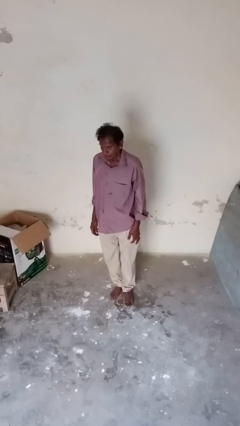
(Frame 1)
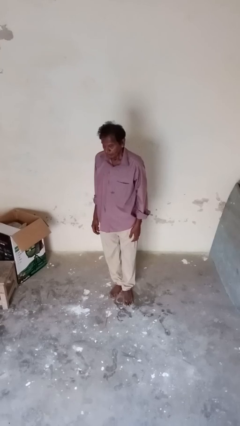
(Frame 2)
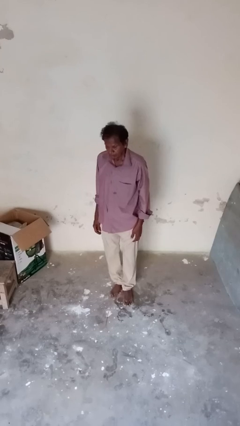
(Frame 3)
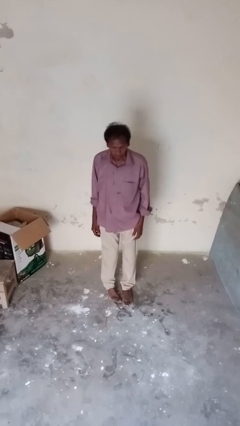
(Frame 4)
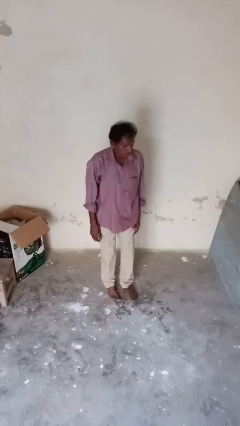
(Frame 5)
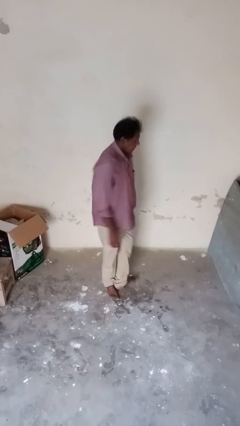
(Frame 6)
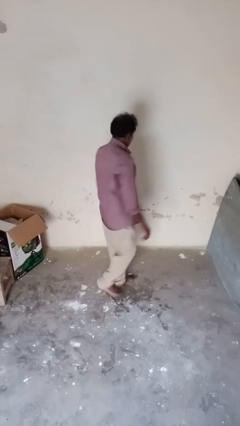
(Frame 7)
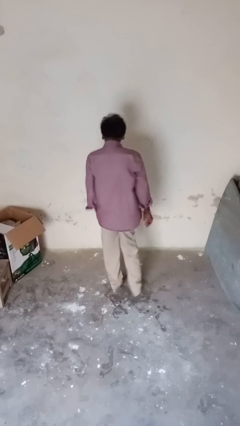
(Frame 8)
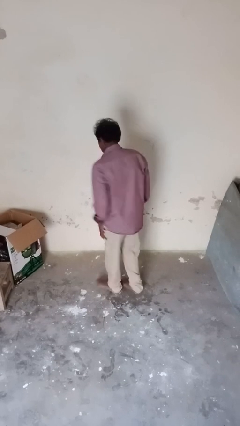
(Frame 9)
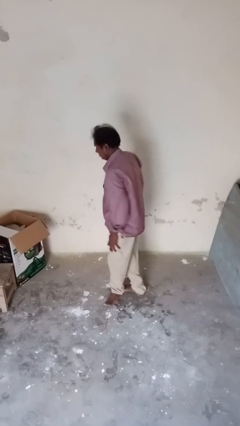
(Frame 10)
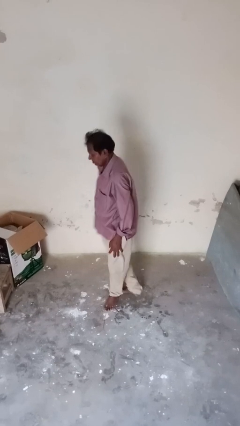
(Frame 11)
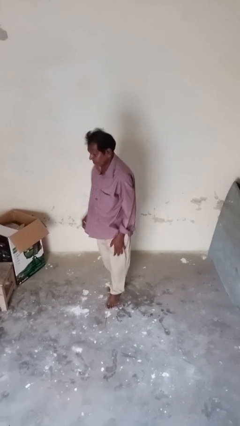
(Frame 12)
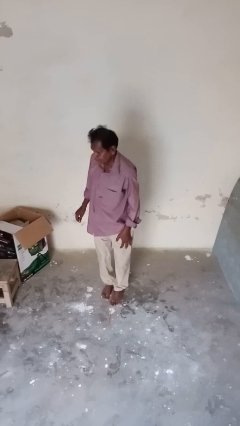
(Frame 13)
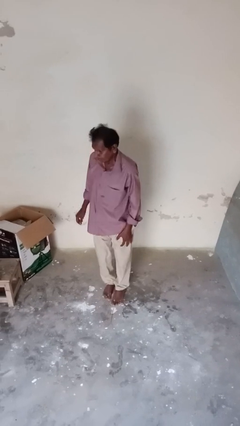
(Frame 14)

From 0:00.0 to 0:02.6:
person twirls

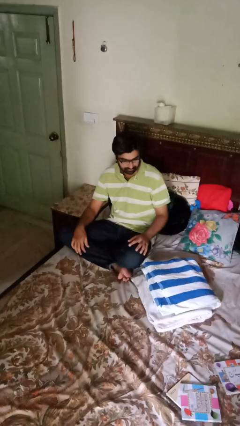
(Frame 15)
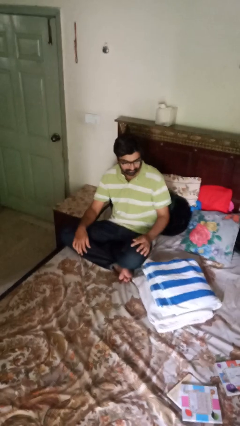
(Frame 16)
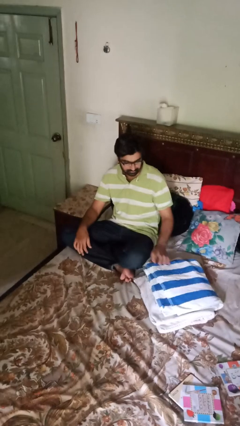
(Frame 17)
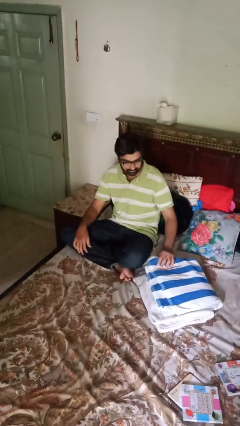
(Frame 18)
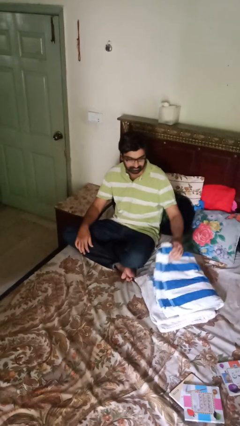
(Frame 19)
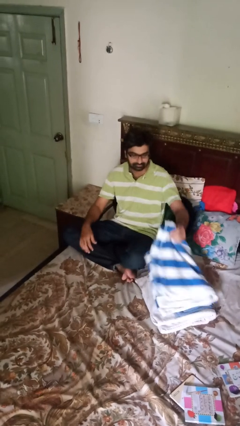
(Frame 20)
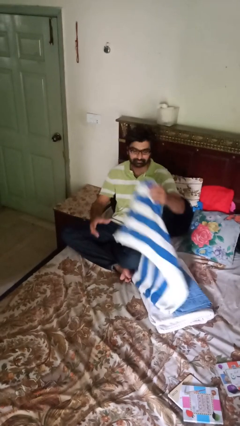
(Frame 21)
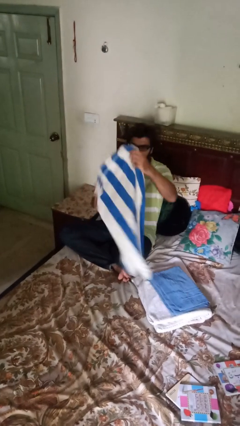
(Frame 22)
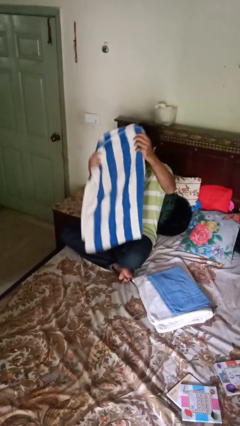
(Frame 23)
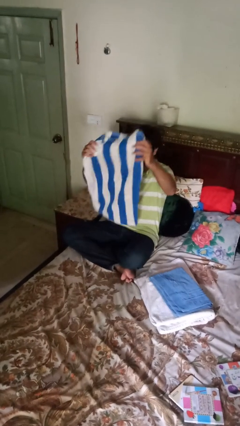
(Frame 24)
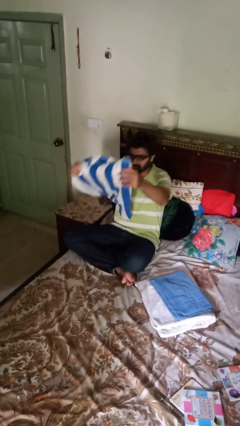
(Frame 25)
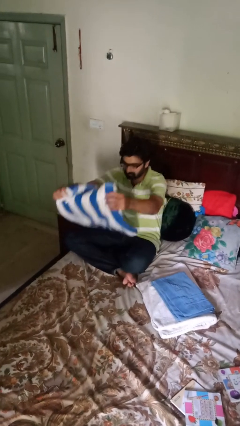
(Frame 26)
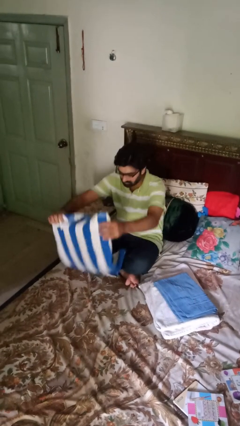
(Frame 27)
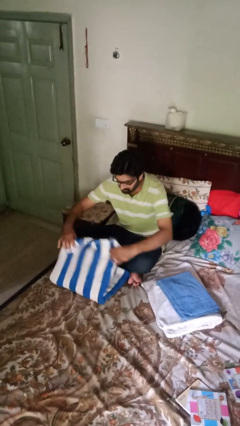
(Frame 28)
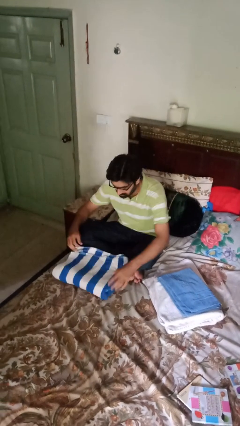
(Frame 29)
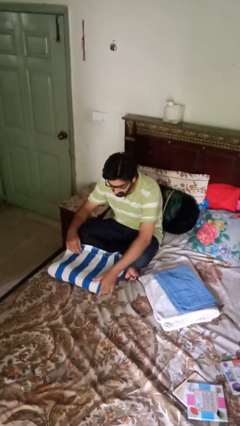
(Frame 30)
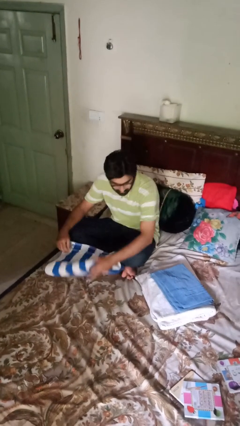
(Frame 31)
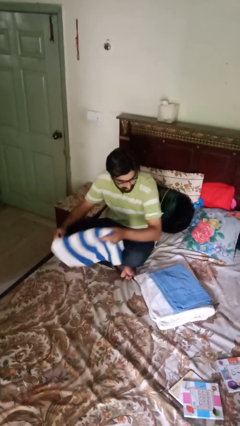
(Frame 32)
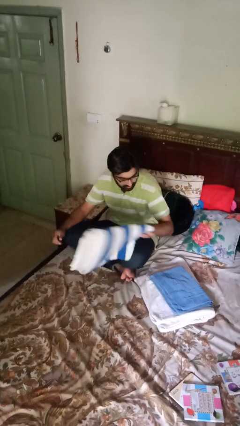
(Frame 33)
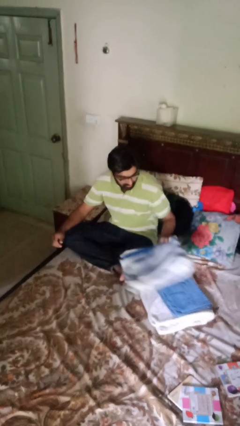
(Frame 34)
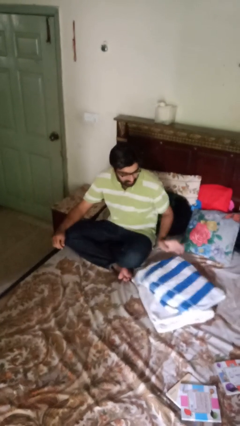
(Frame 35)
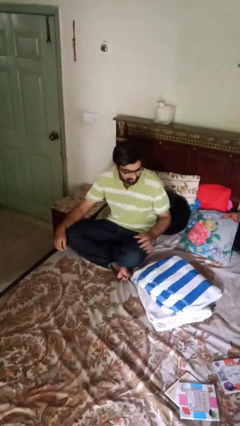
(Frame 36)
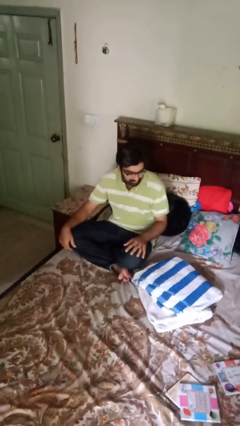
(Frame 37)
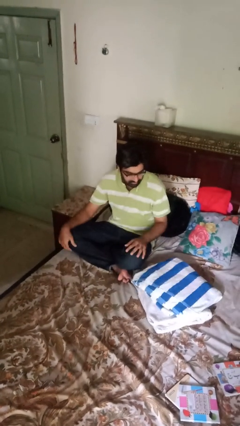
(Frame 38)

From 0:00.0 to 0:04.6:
person folds towel

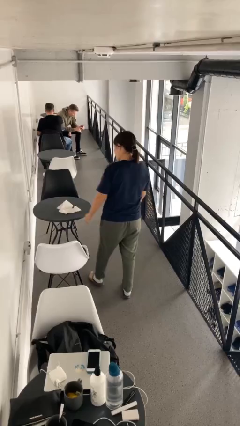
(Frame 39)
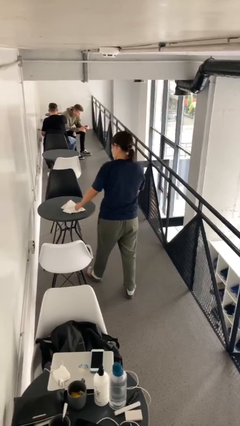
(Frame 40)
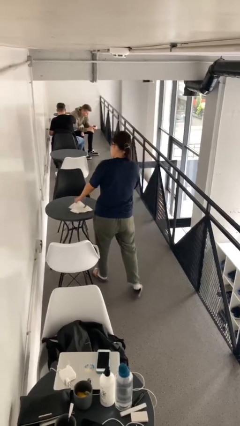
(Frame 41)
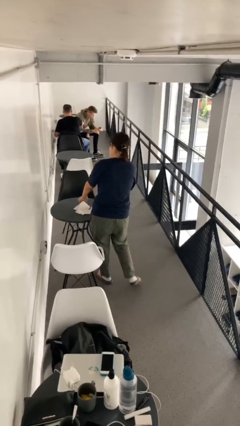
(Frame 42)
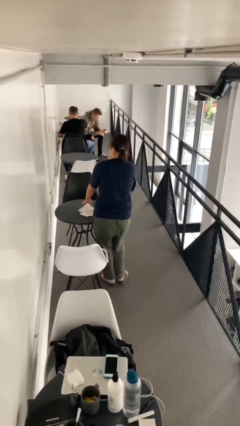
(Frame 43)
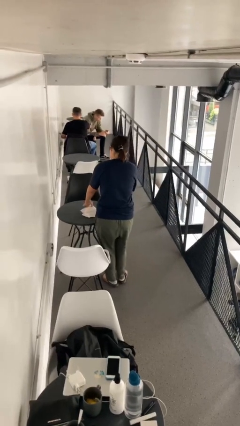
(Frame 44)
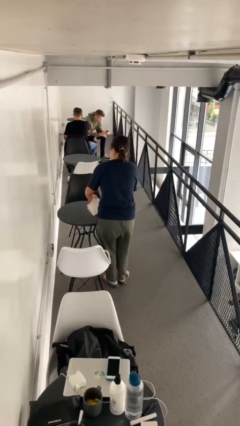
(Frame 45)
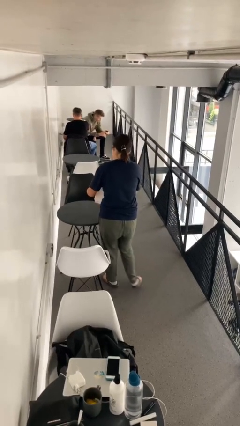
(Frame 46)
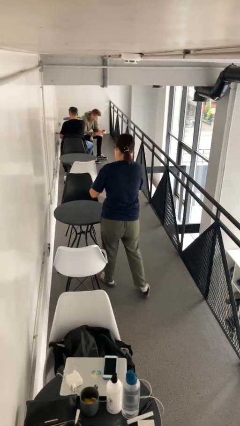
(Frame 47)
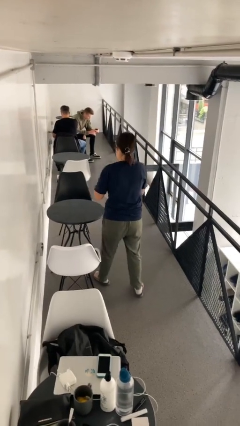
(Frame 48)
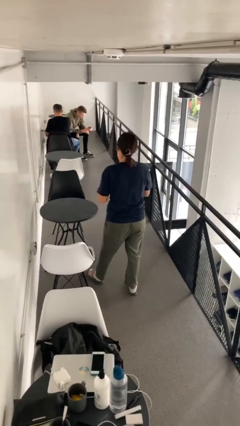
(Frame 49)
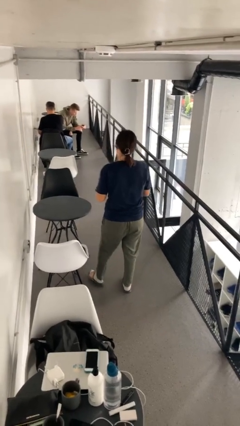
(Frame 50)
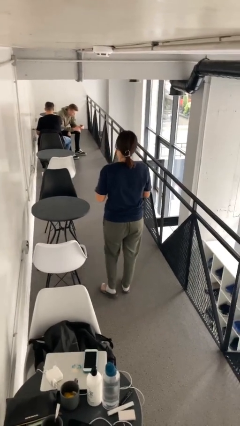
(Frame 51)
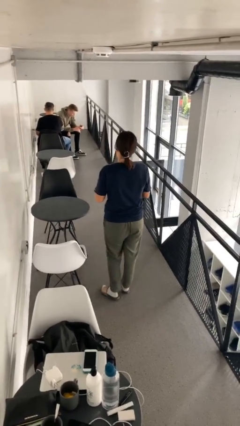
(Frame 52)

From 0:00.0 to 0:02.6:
person picks up object from table

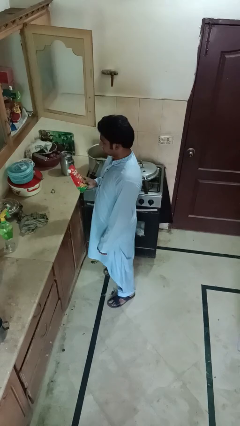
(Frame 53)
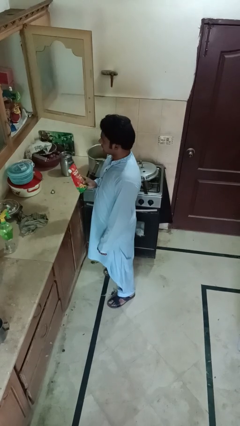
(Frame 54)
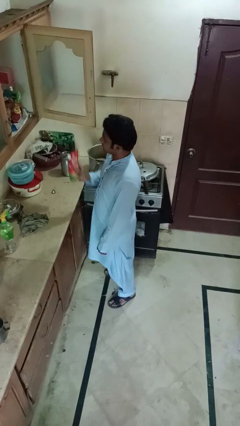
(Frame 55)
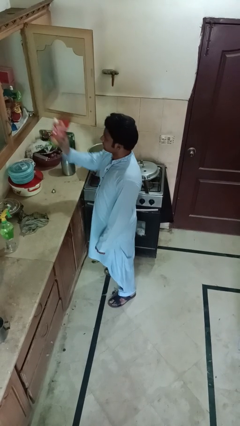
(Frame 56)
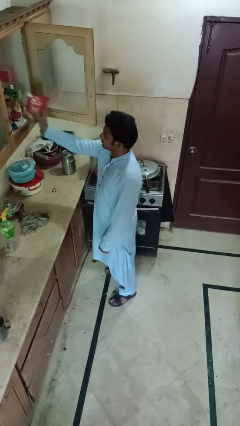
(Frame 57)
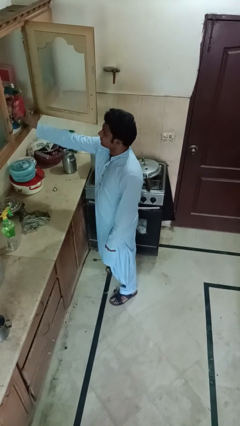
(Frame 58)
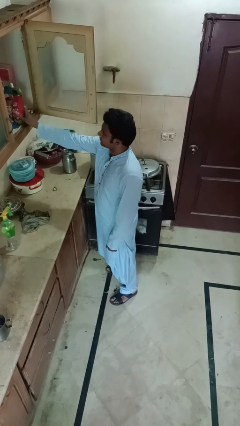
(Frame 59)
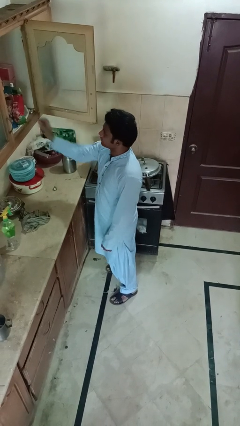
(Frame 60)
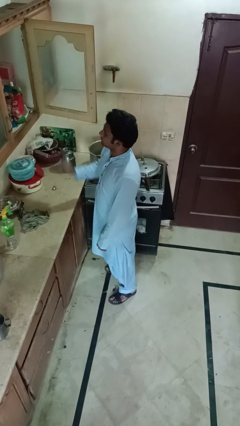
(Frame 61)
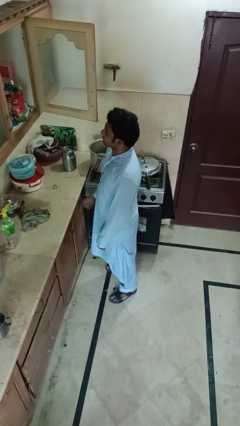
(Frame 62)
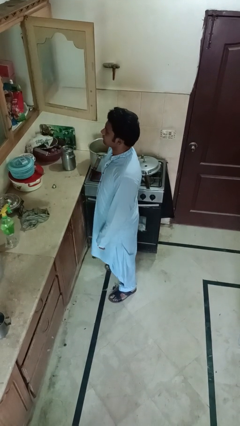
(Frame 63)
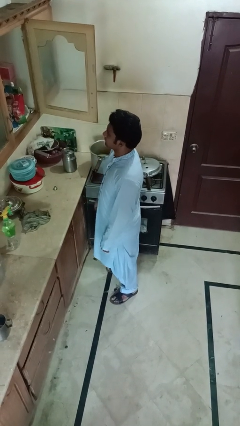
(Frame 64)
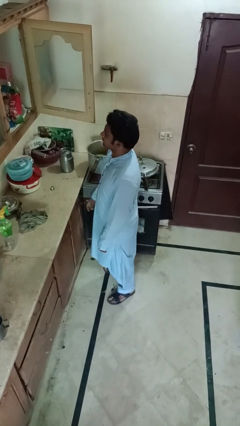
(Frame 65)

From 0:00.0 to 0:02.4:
person puts down object into cabinet

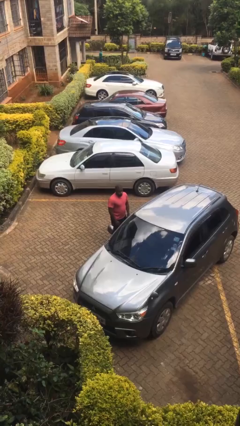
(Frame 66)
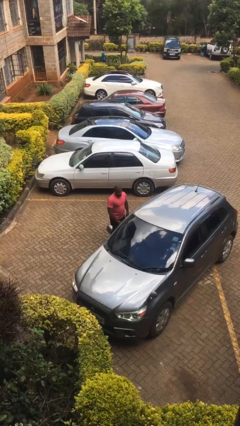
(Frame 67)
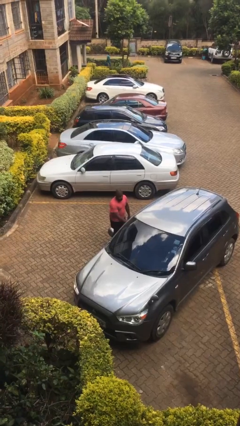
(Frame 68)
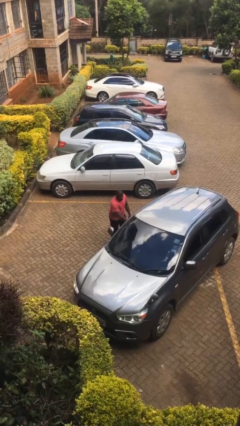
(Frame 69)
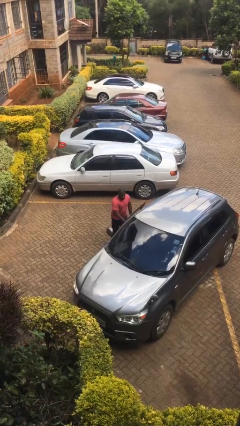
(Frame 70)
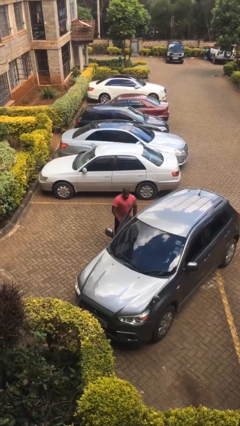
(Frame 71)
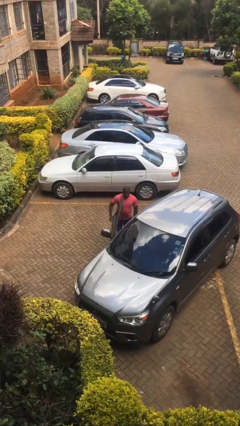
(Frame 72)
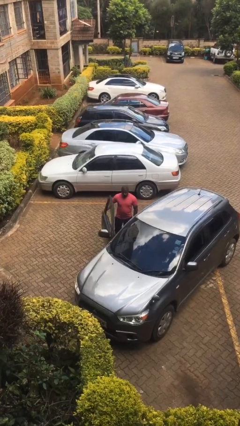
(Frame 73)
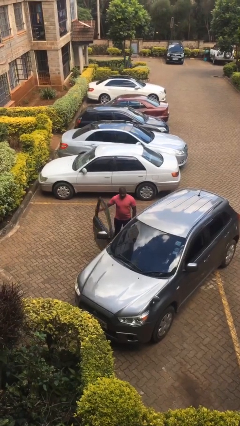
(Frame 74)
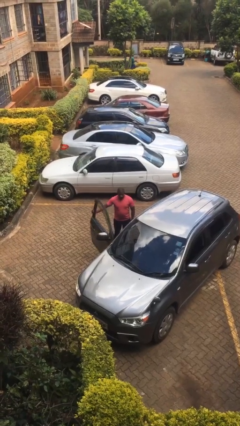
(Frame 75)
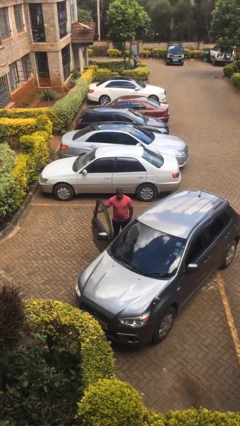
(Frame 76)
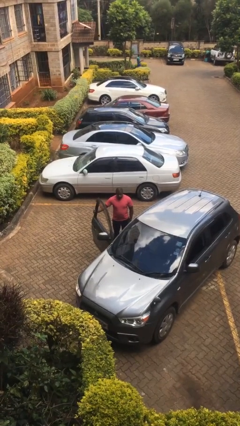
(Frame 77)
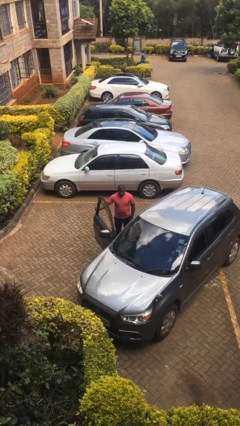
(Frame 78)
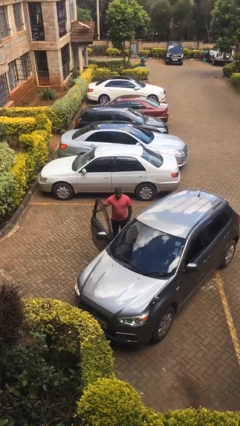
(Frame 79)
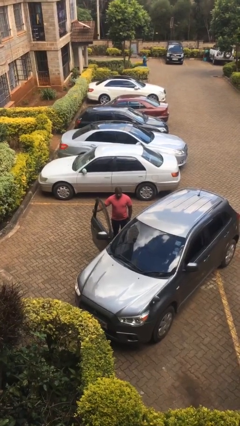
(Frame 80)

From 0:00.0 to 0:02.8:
person opens car door

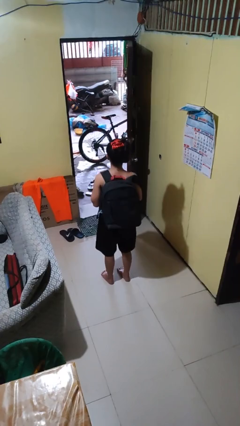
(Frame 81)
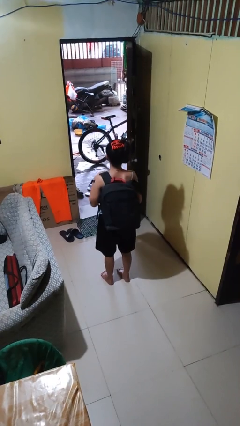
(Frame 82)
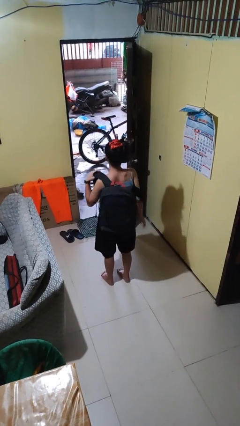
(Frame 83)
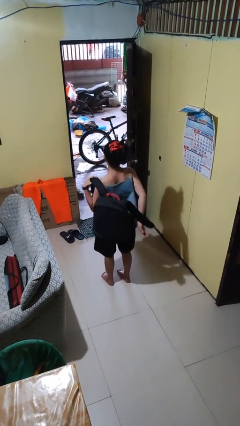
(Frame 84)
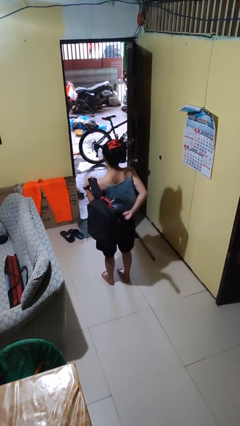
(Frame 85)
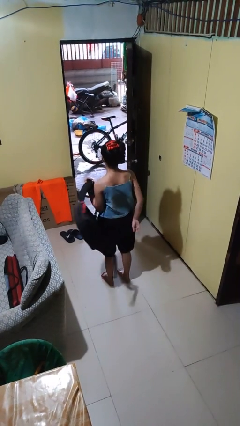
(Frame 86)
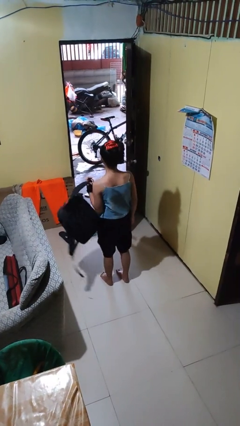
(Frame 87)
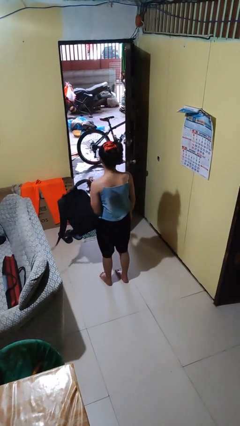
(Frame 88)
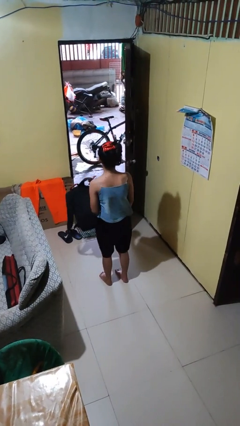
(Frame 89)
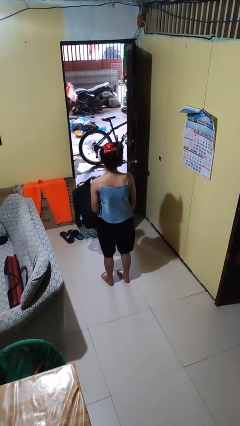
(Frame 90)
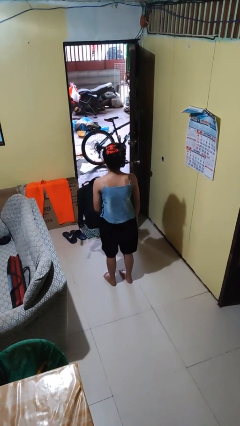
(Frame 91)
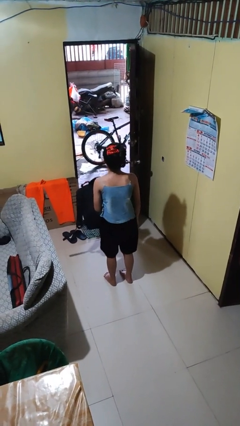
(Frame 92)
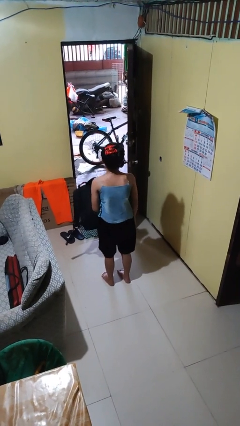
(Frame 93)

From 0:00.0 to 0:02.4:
person takes off backpack
